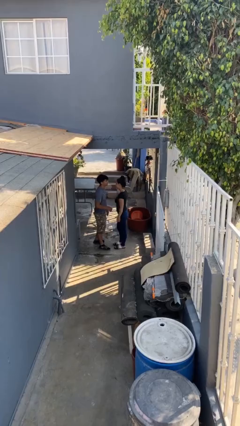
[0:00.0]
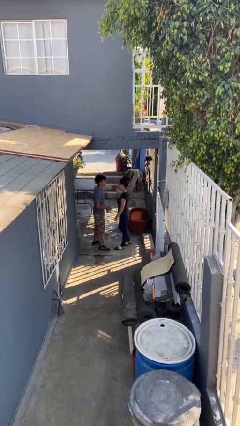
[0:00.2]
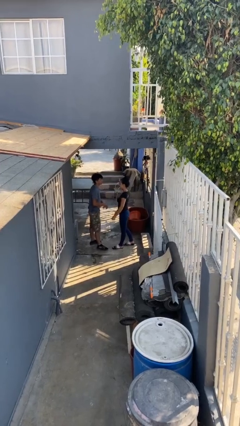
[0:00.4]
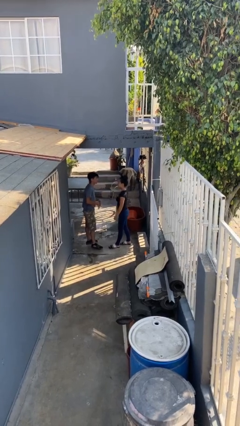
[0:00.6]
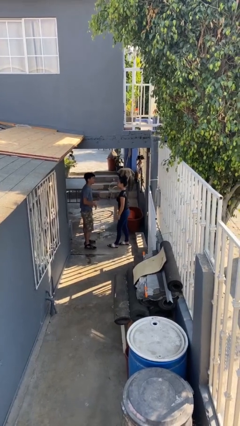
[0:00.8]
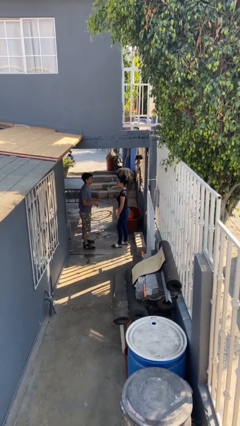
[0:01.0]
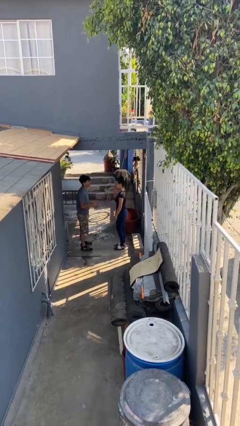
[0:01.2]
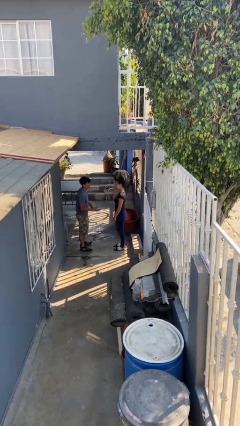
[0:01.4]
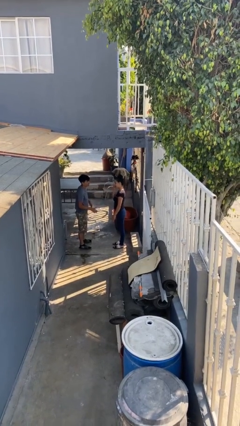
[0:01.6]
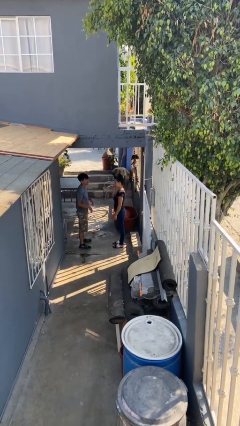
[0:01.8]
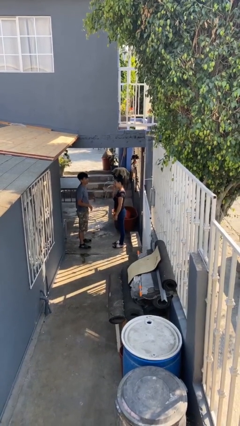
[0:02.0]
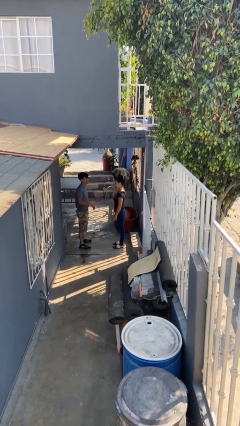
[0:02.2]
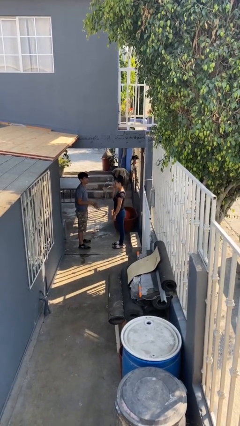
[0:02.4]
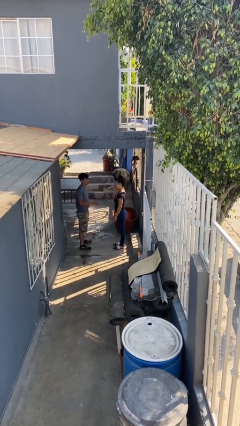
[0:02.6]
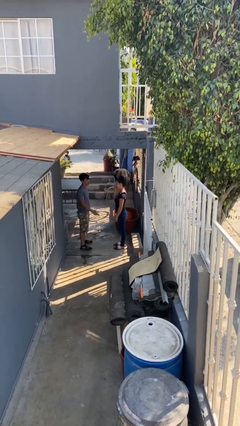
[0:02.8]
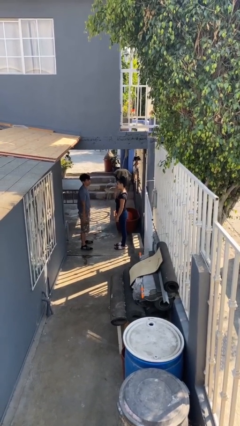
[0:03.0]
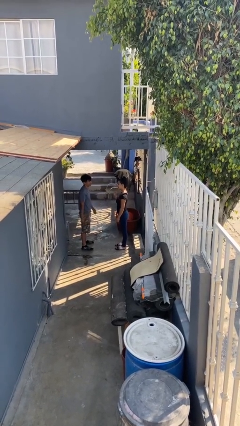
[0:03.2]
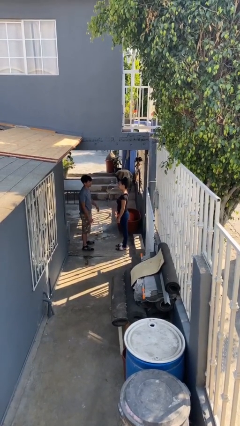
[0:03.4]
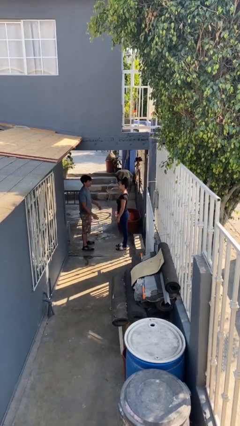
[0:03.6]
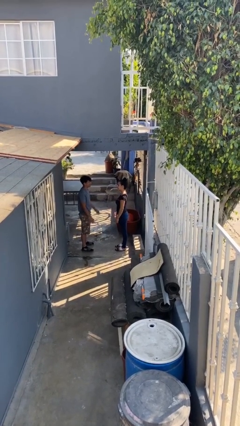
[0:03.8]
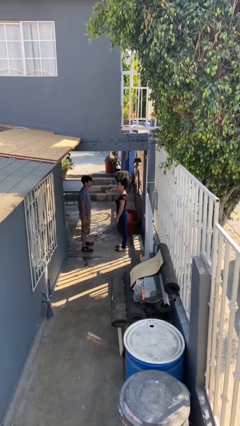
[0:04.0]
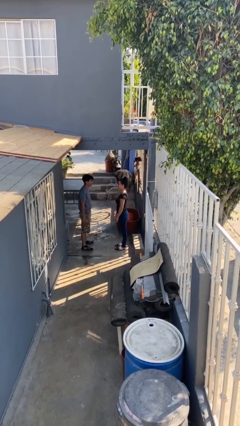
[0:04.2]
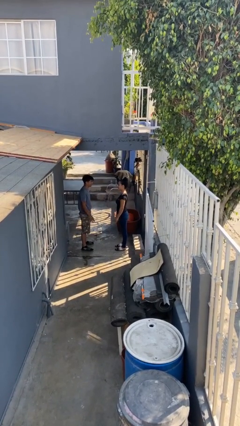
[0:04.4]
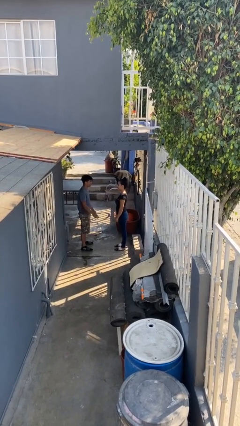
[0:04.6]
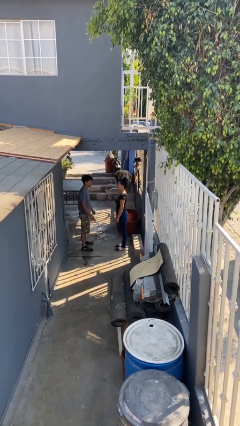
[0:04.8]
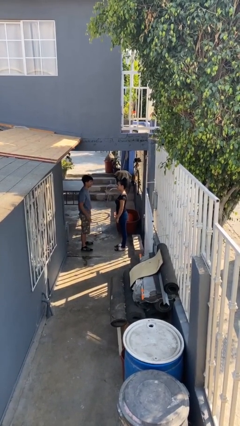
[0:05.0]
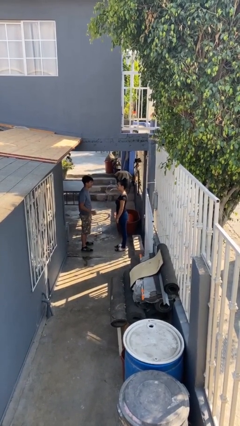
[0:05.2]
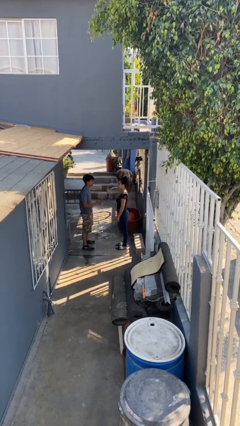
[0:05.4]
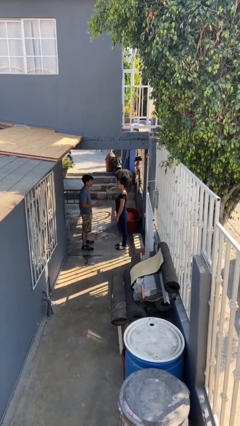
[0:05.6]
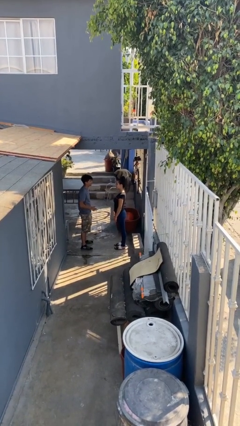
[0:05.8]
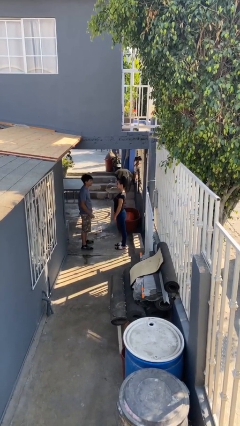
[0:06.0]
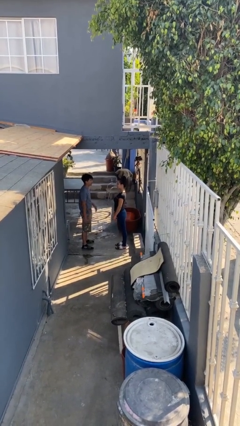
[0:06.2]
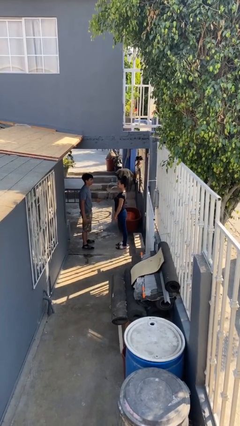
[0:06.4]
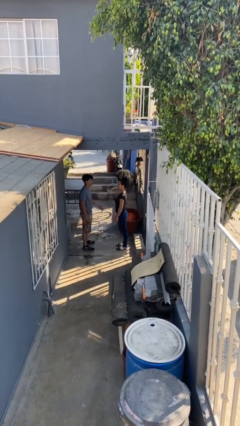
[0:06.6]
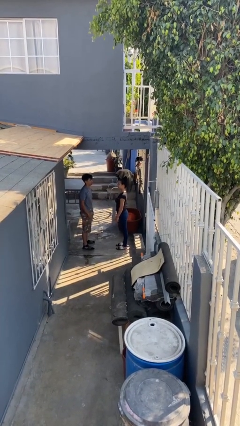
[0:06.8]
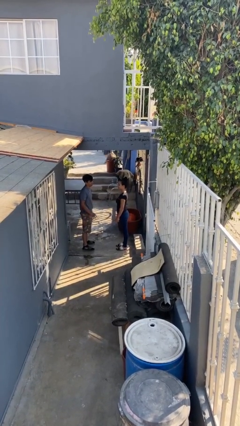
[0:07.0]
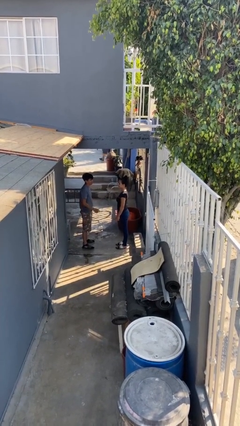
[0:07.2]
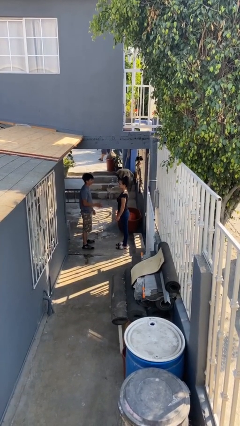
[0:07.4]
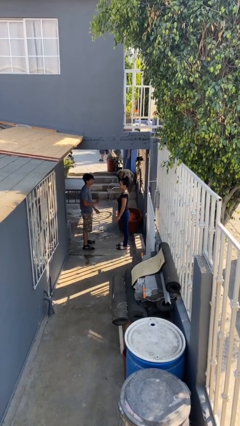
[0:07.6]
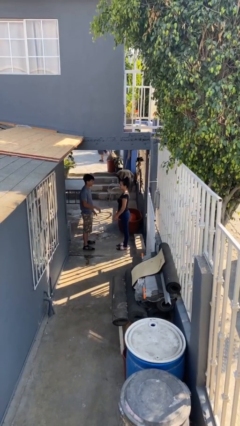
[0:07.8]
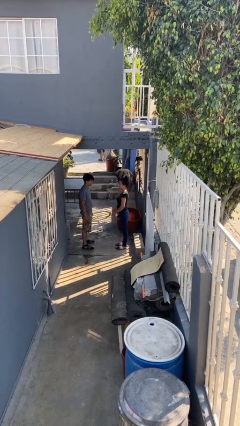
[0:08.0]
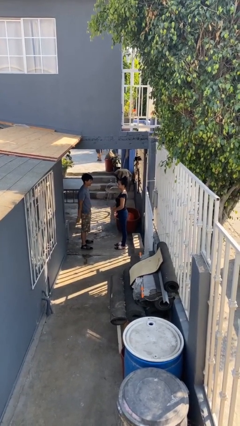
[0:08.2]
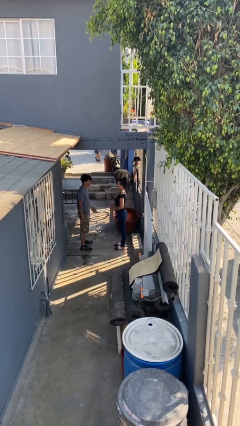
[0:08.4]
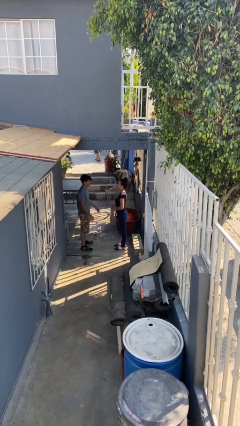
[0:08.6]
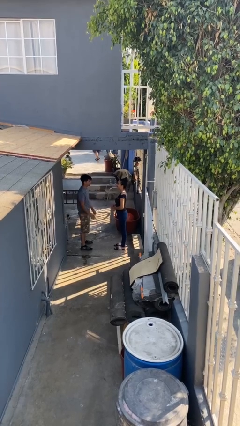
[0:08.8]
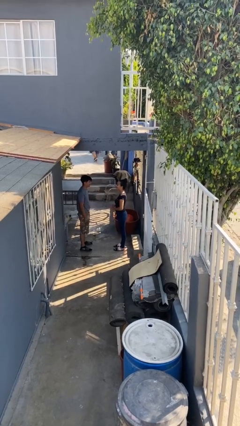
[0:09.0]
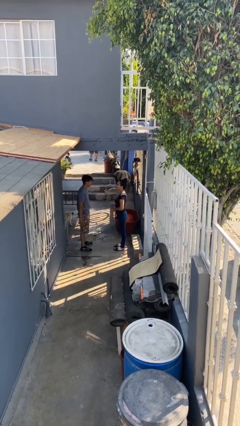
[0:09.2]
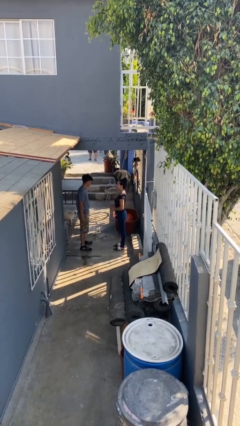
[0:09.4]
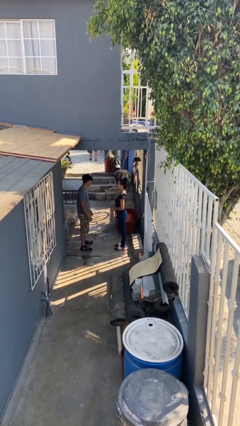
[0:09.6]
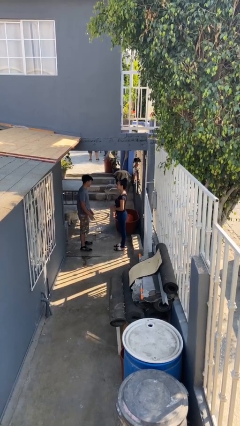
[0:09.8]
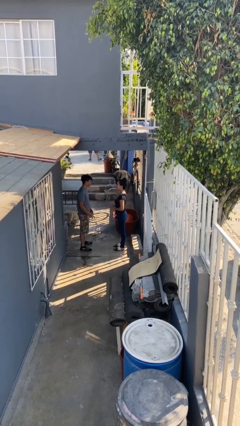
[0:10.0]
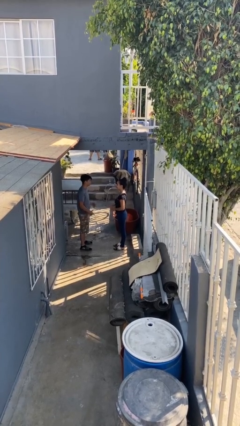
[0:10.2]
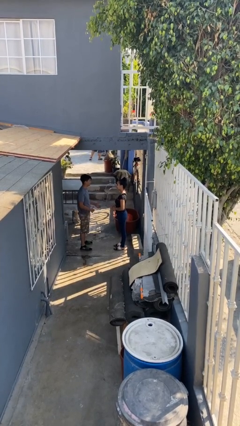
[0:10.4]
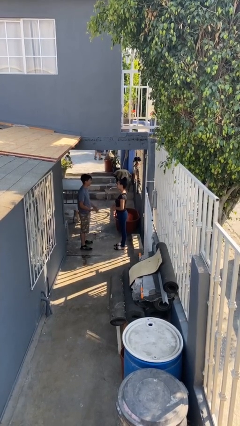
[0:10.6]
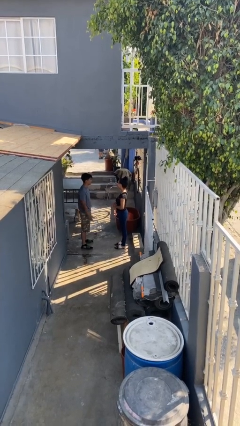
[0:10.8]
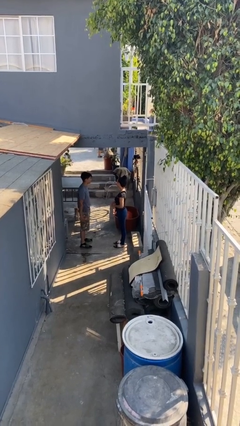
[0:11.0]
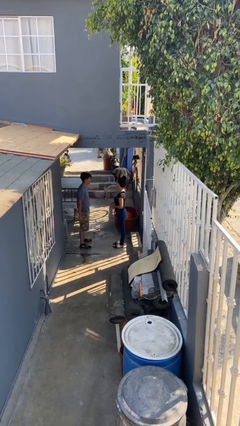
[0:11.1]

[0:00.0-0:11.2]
person talks to person

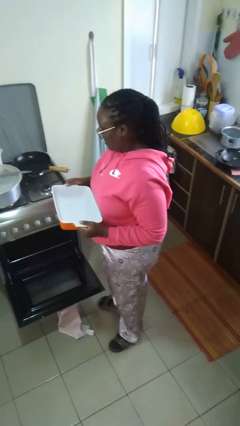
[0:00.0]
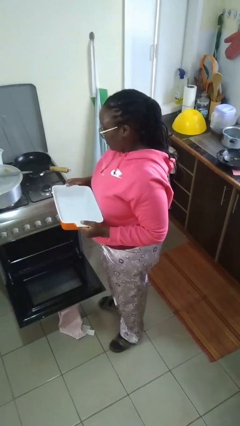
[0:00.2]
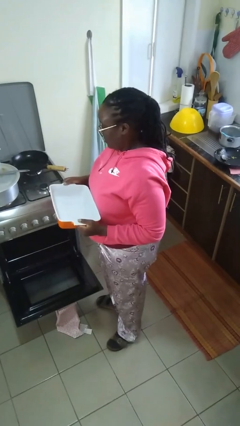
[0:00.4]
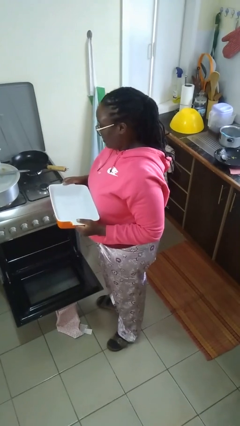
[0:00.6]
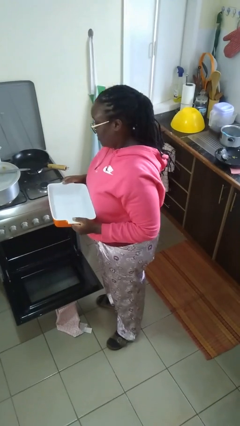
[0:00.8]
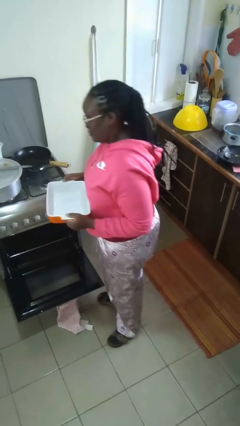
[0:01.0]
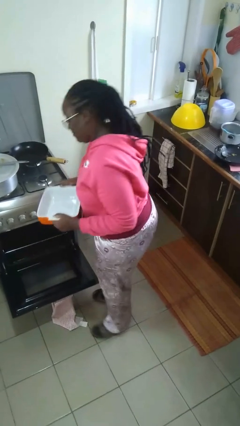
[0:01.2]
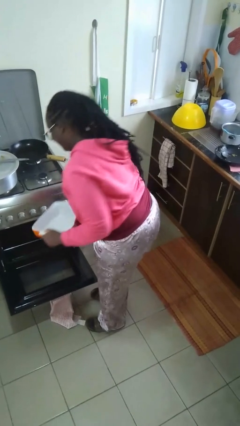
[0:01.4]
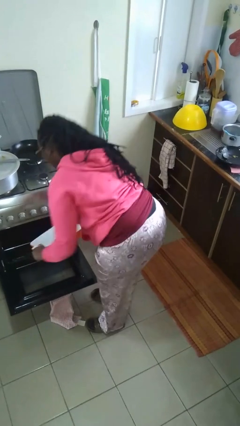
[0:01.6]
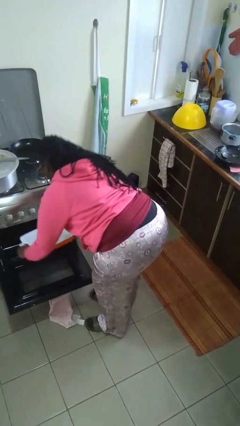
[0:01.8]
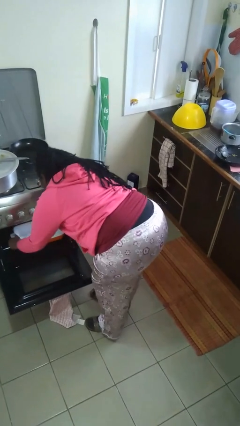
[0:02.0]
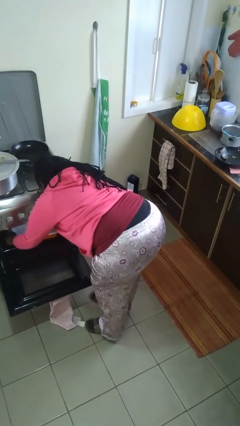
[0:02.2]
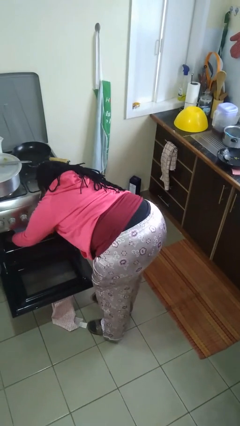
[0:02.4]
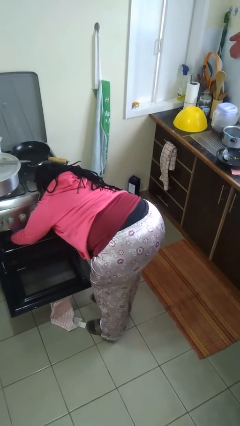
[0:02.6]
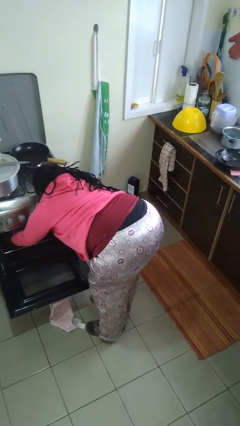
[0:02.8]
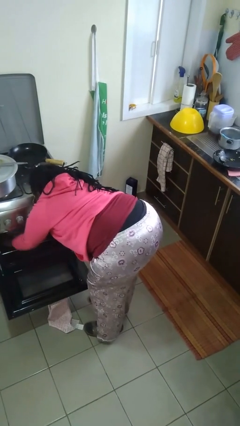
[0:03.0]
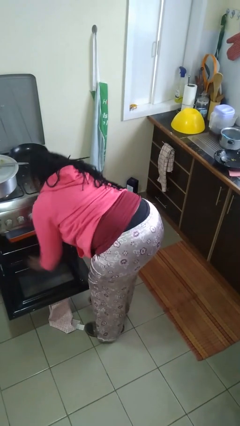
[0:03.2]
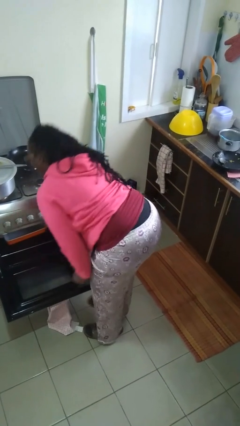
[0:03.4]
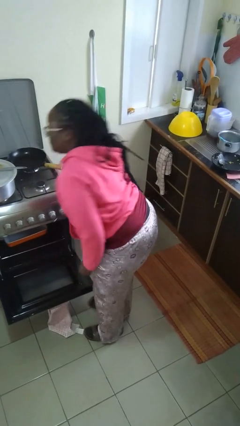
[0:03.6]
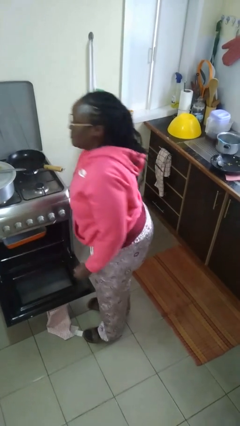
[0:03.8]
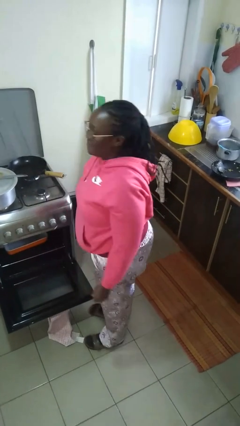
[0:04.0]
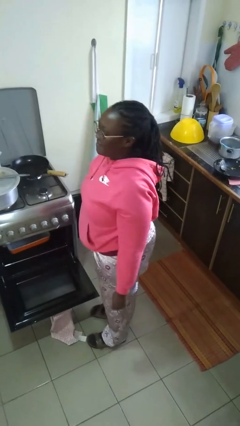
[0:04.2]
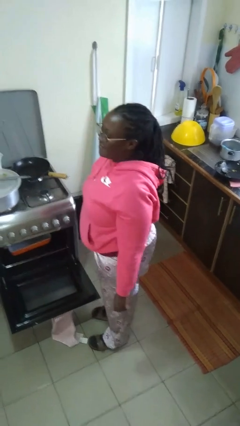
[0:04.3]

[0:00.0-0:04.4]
person puts object into oven

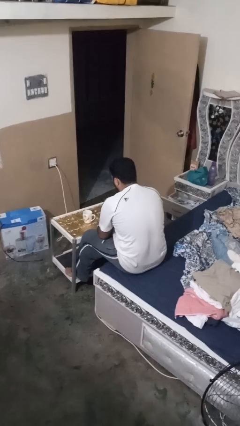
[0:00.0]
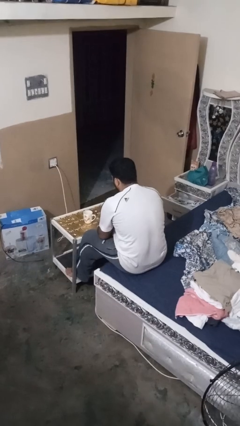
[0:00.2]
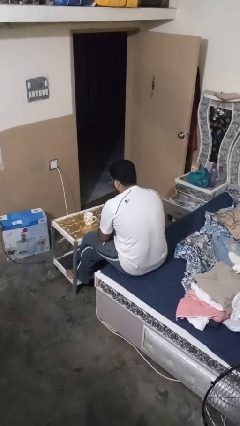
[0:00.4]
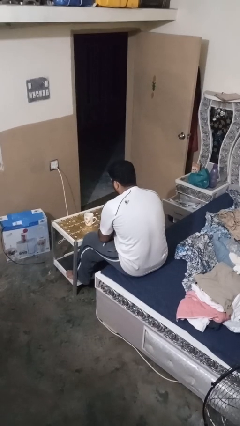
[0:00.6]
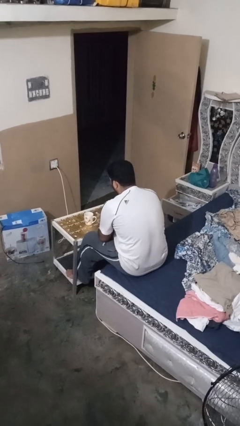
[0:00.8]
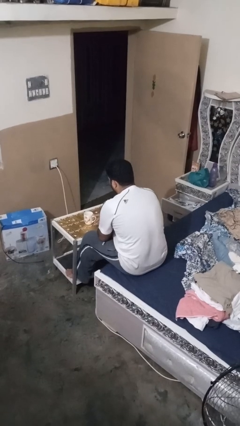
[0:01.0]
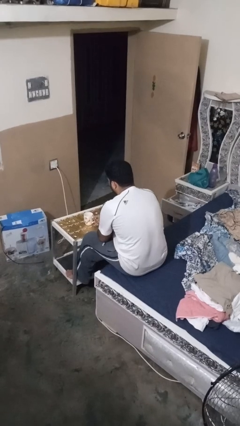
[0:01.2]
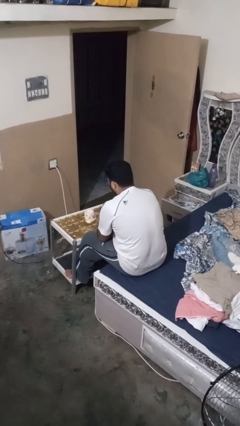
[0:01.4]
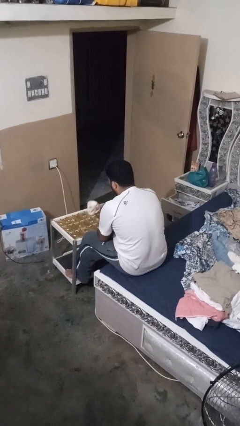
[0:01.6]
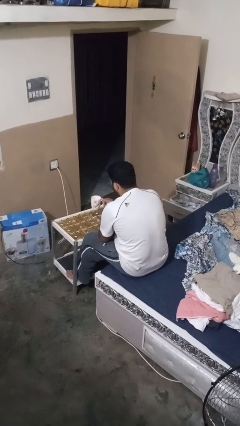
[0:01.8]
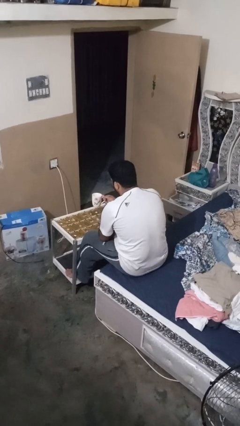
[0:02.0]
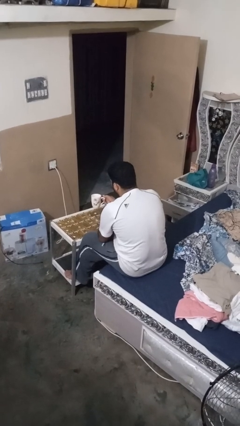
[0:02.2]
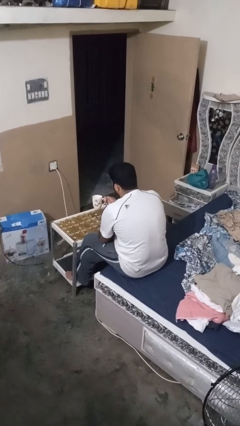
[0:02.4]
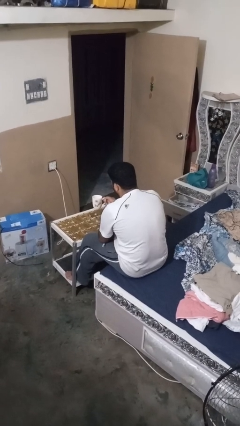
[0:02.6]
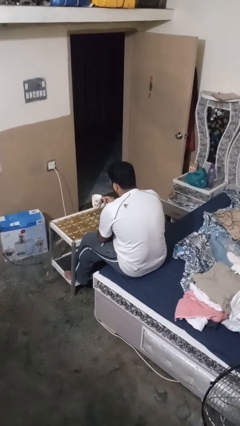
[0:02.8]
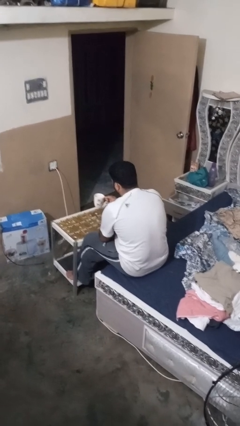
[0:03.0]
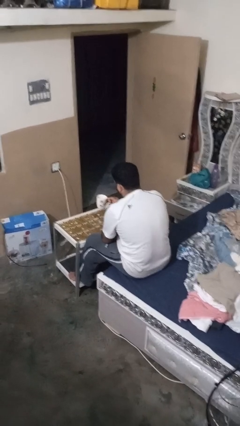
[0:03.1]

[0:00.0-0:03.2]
person picks up object from table
